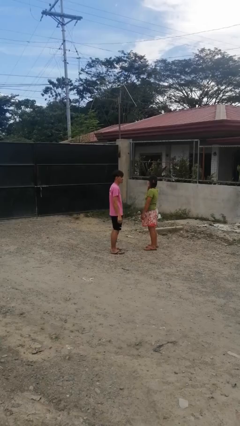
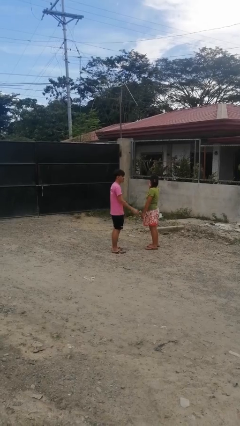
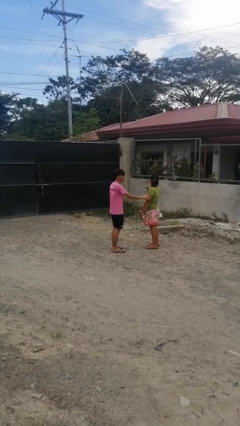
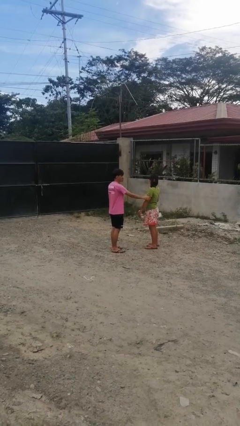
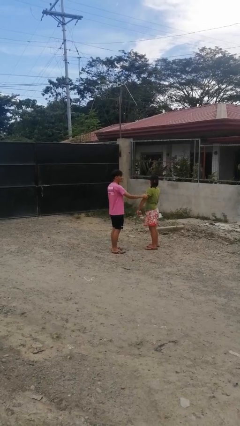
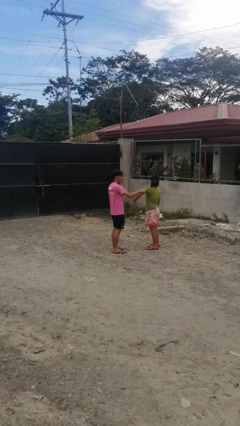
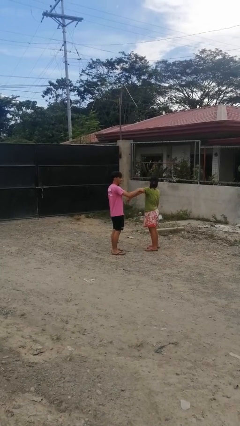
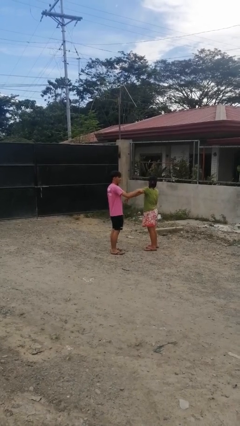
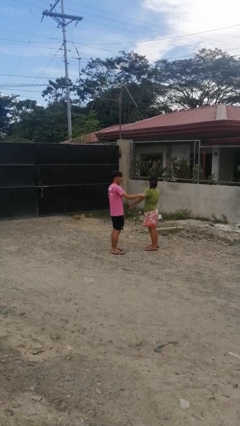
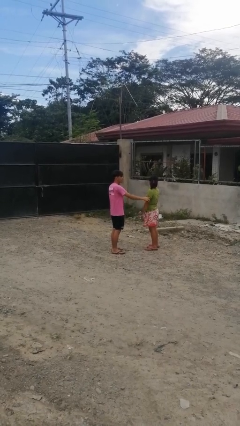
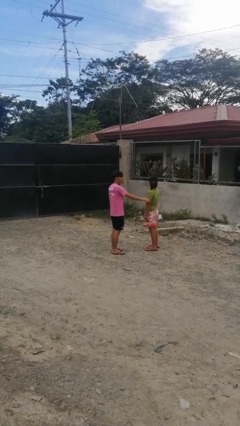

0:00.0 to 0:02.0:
person grabs person by bicep

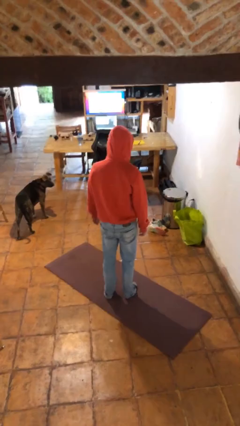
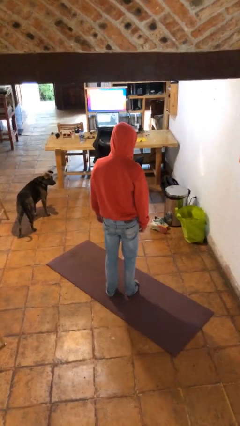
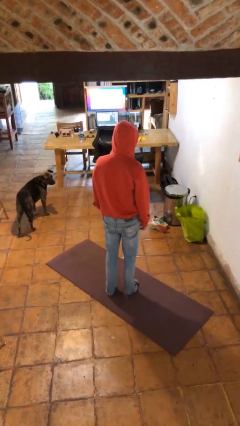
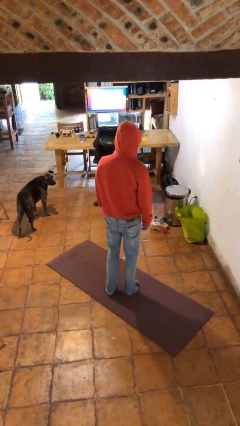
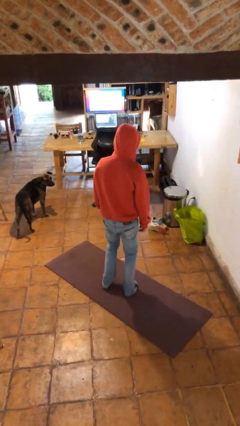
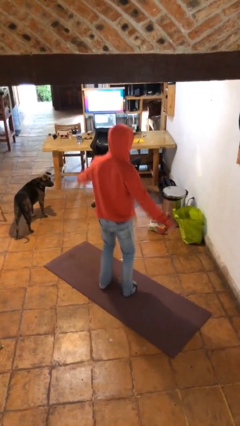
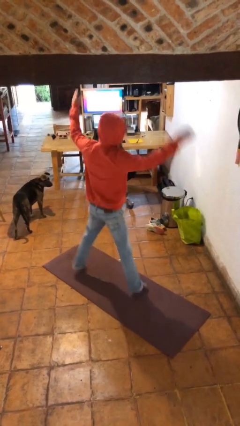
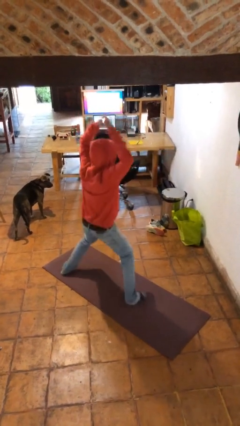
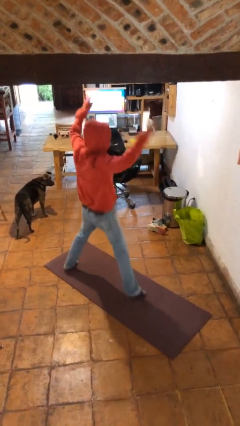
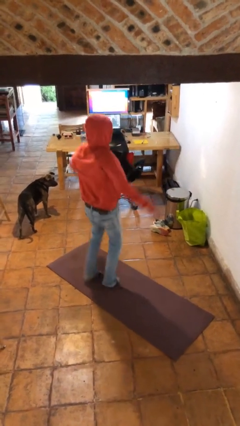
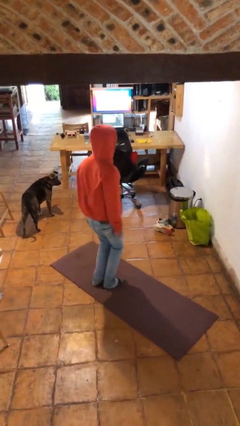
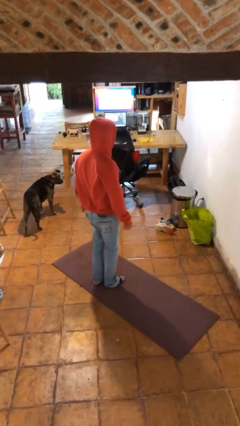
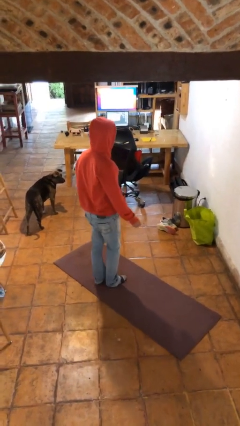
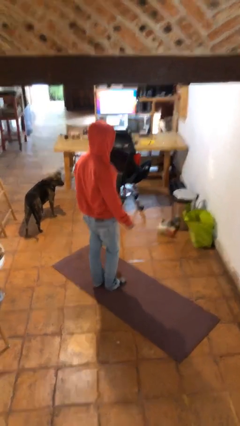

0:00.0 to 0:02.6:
person exercises with jumping jacks

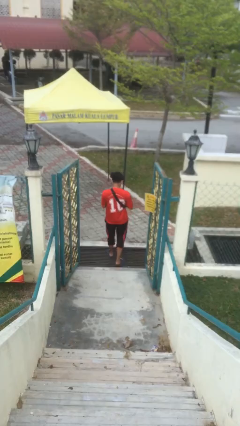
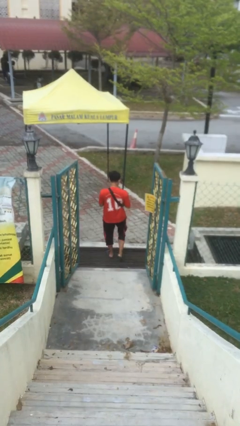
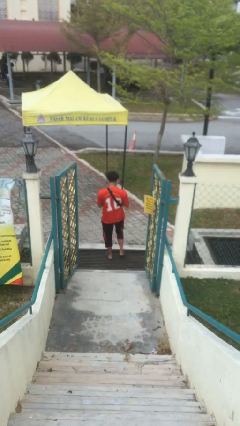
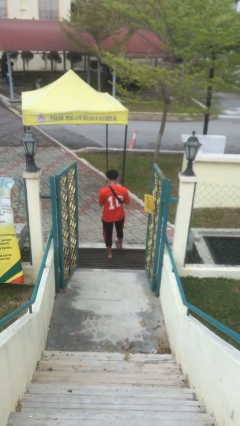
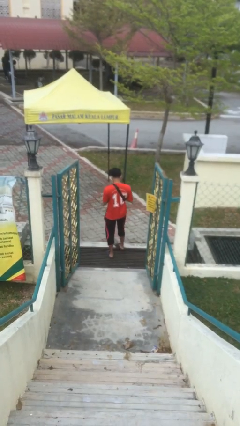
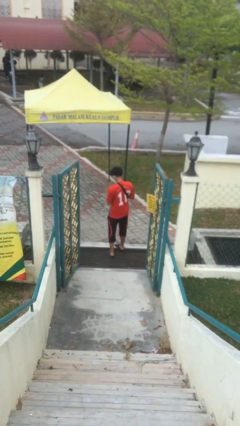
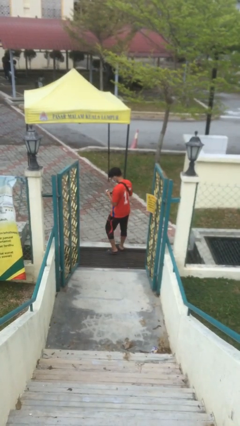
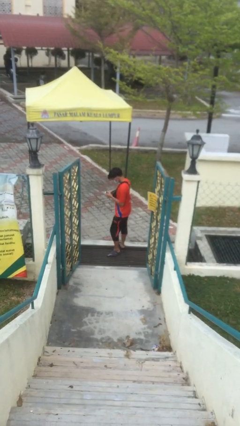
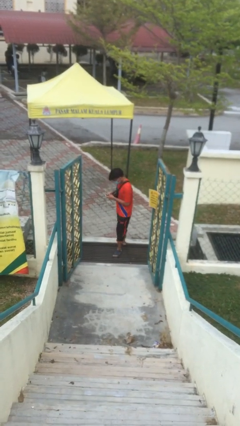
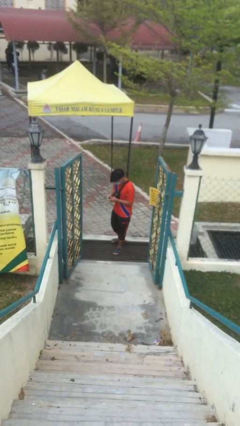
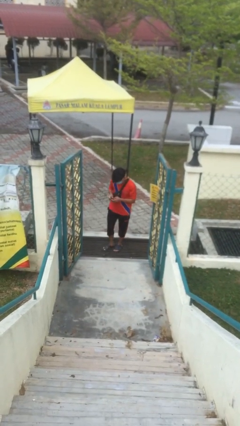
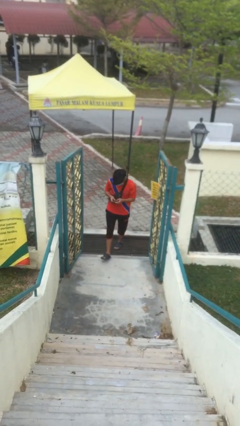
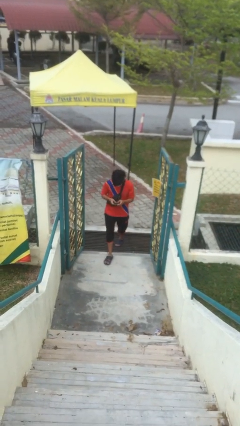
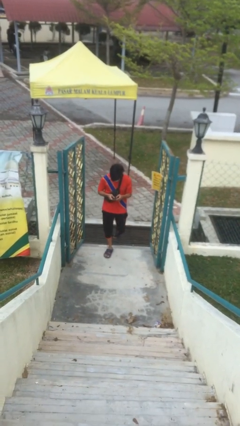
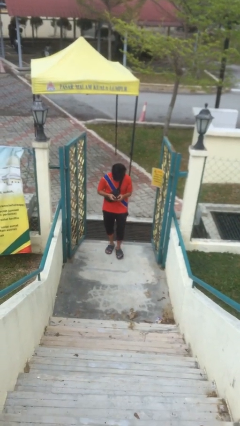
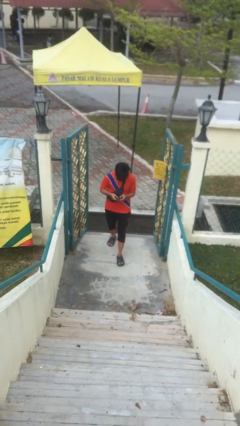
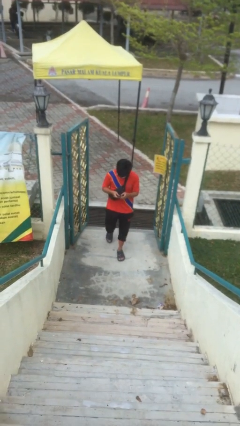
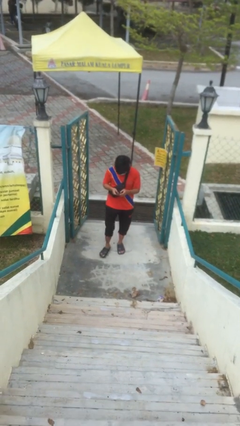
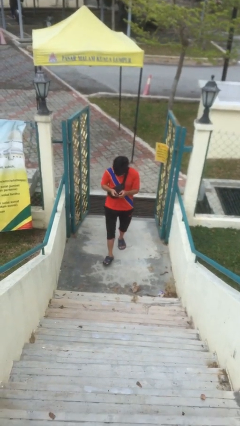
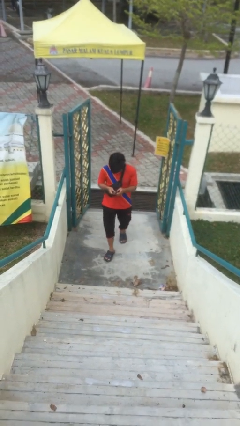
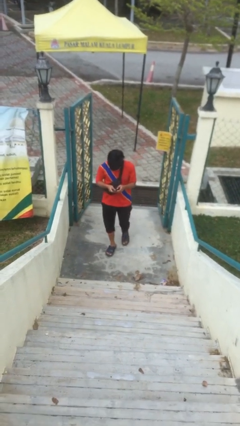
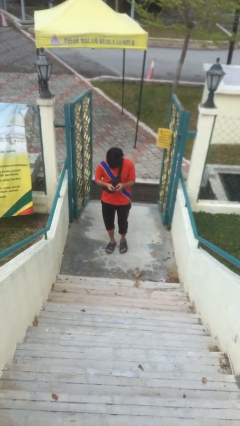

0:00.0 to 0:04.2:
person enters scene through structure

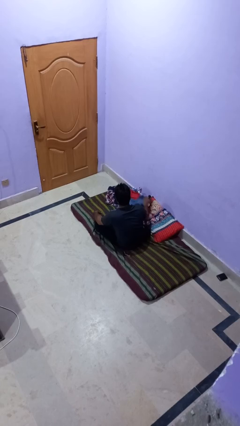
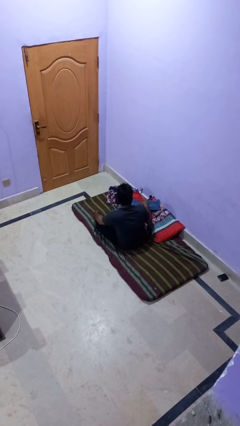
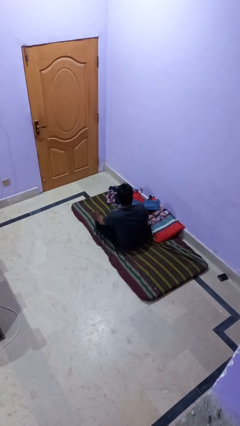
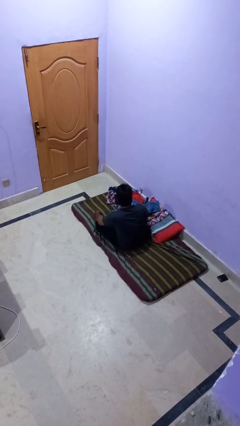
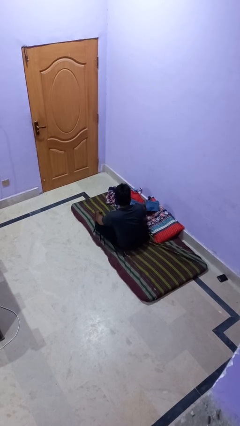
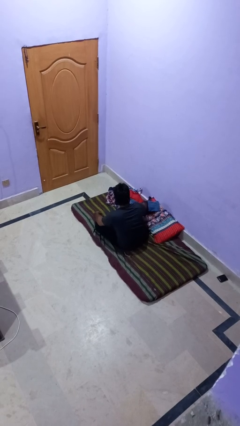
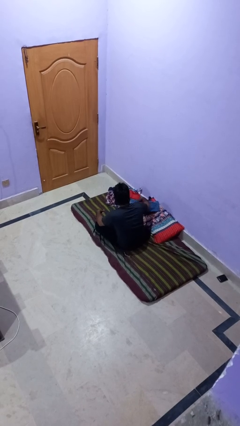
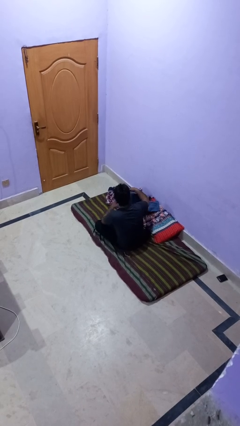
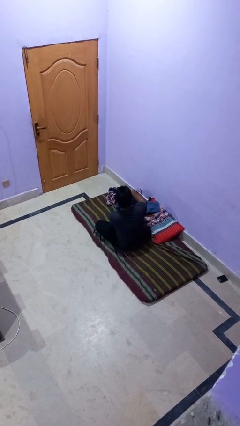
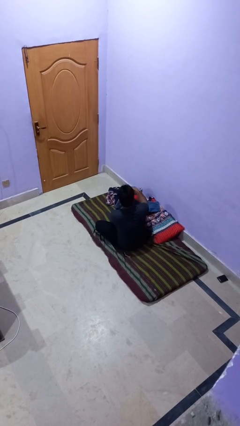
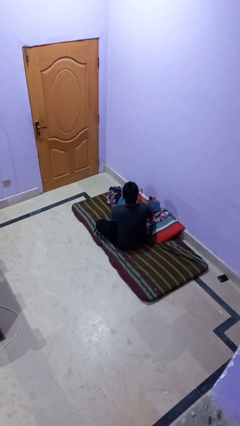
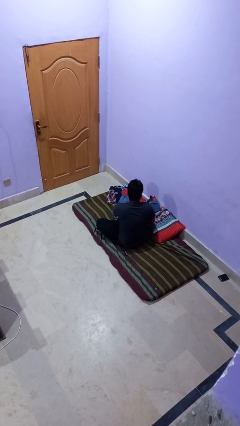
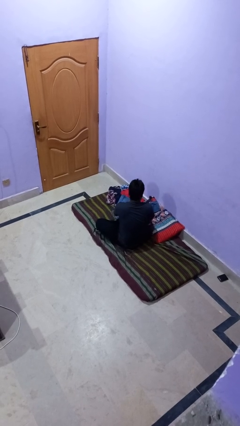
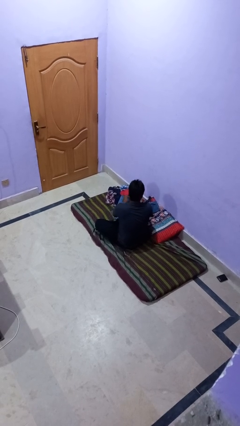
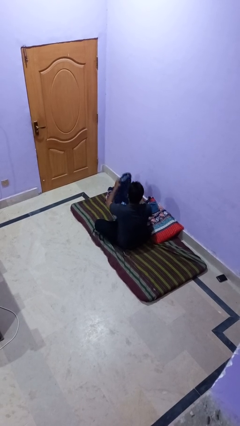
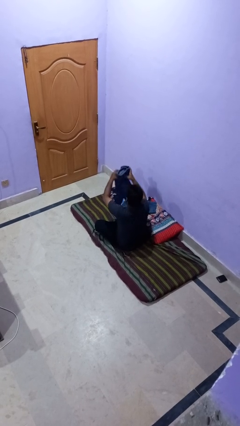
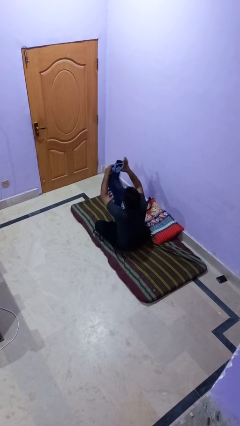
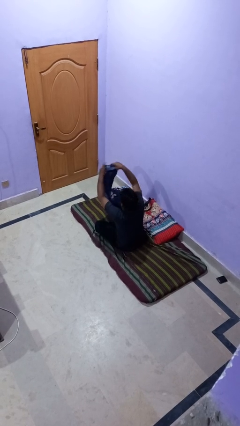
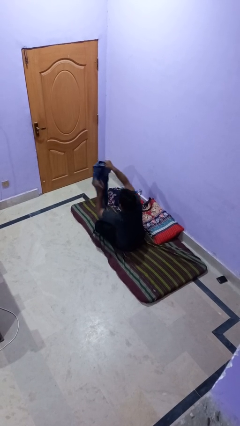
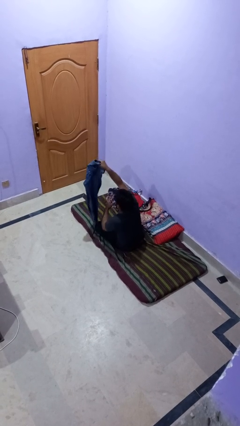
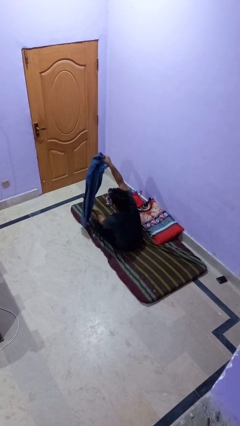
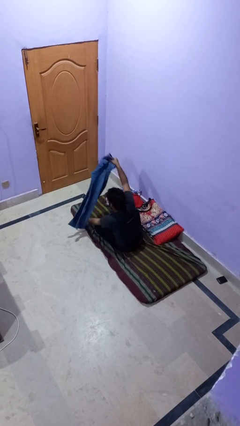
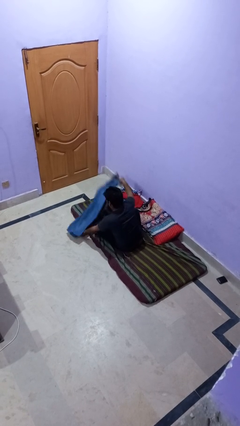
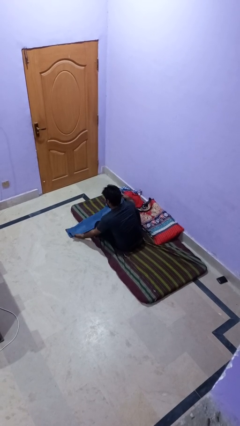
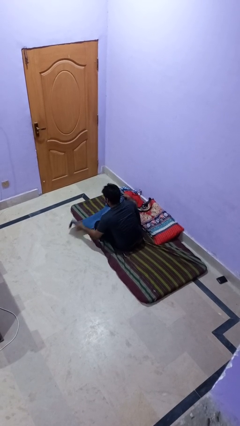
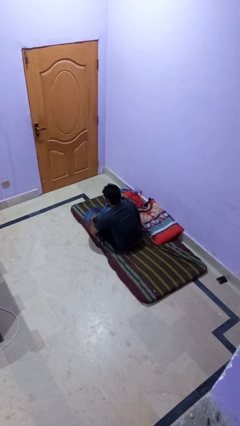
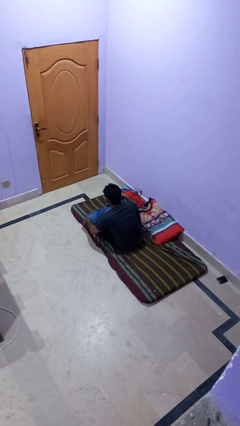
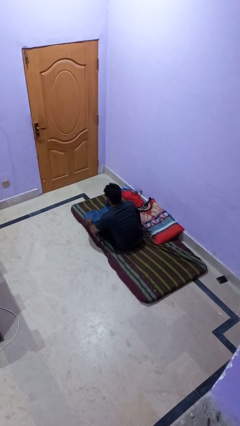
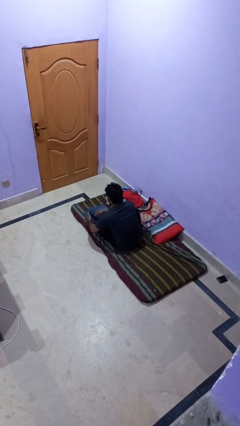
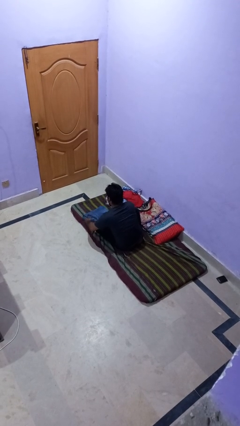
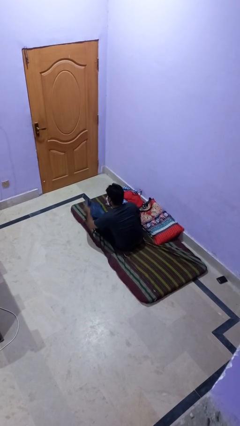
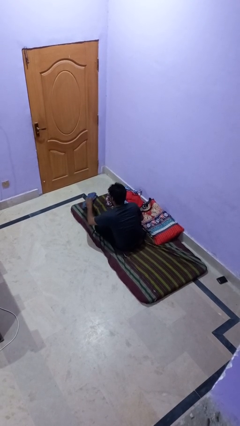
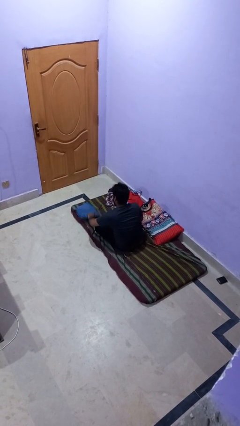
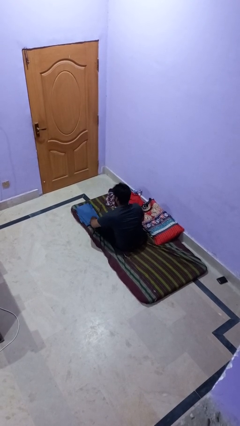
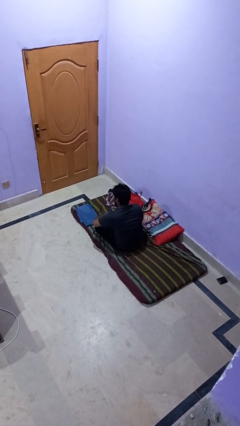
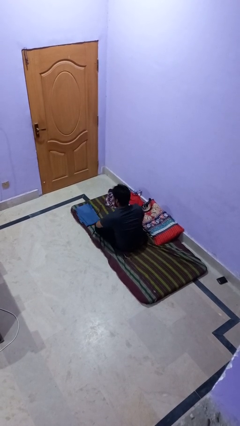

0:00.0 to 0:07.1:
person folds pants

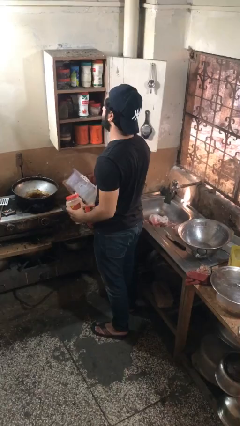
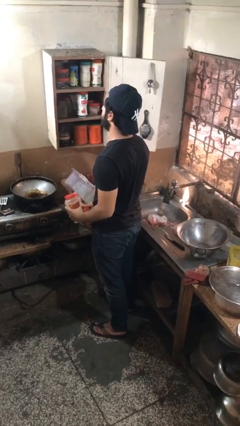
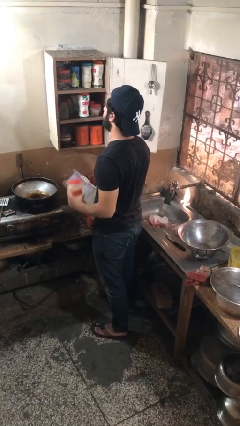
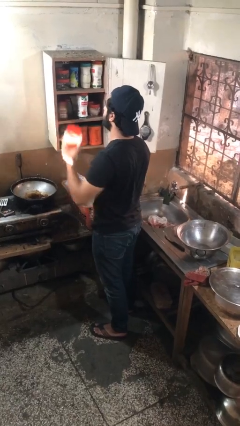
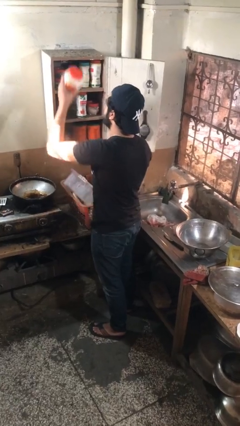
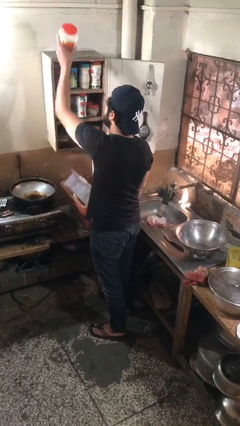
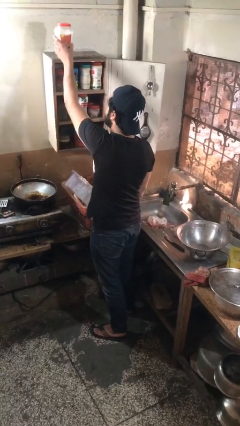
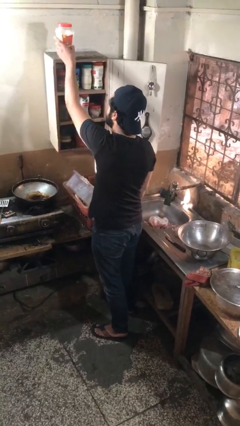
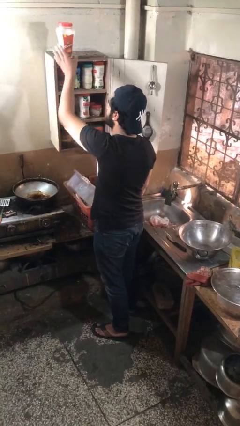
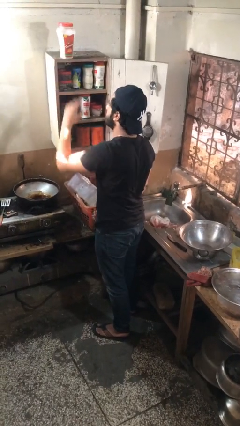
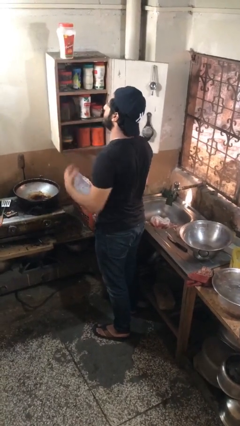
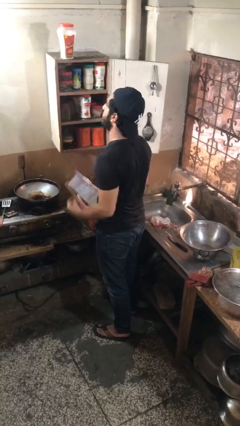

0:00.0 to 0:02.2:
person puts object in cabinet
